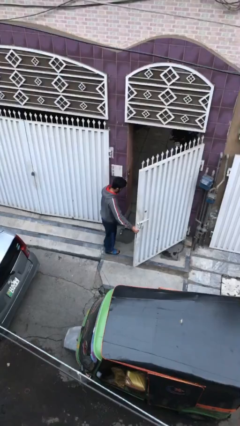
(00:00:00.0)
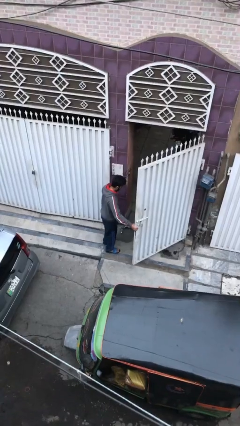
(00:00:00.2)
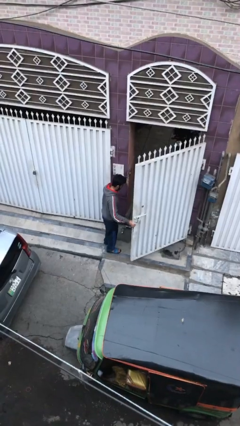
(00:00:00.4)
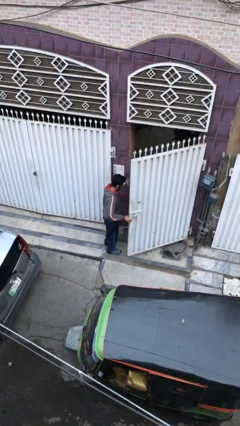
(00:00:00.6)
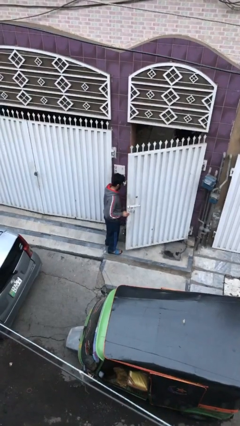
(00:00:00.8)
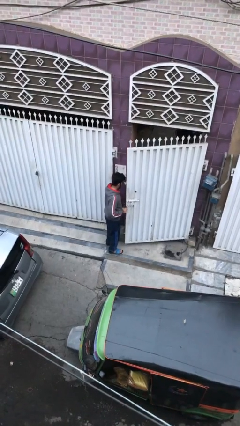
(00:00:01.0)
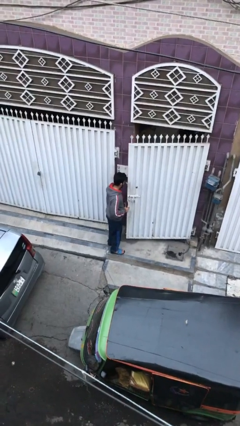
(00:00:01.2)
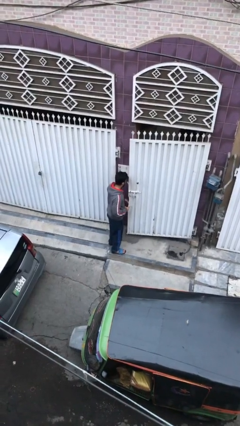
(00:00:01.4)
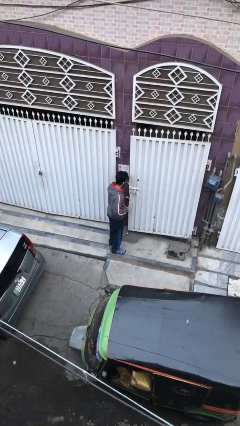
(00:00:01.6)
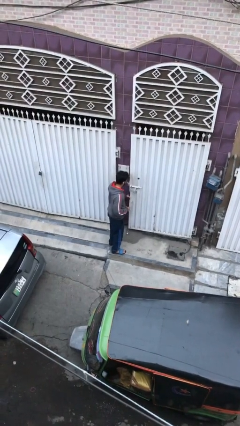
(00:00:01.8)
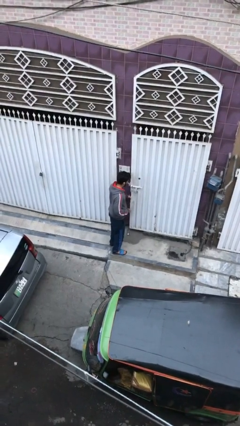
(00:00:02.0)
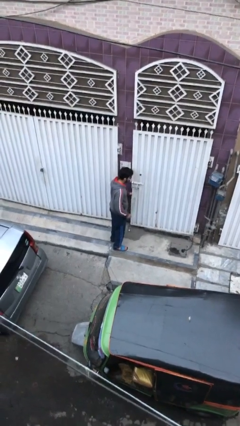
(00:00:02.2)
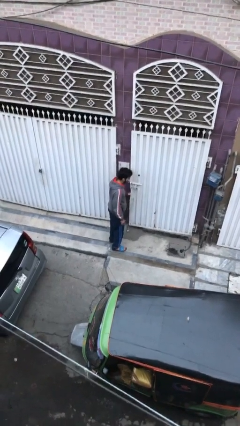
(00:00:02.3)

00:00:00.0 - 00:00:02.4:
person closes facility door

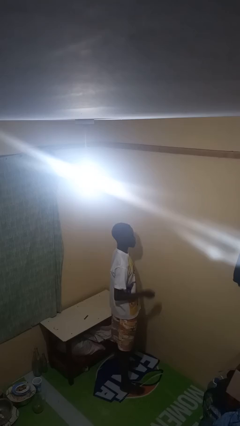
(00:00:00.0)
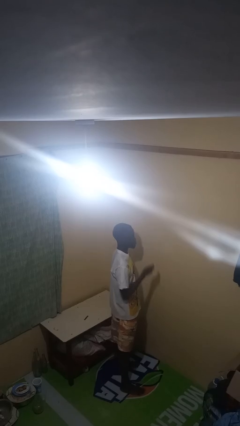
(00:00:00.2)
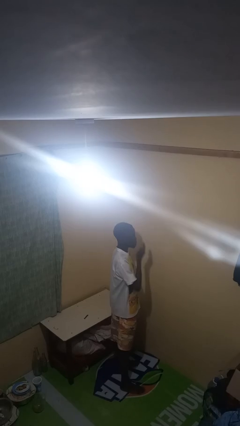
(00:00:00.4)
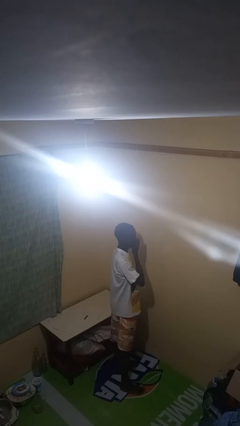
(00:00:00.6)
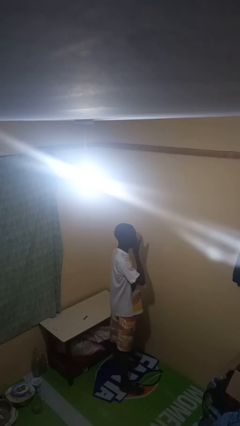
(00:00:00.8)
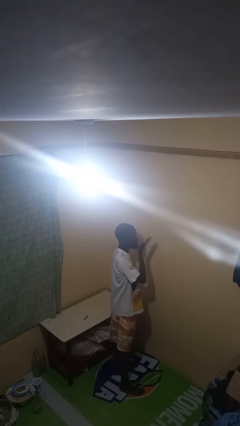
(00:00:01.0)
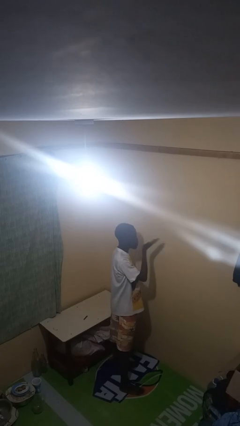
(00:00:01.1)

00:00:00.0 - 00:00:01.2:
person gestures blow kiss

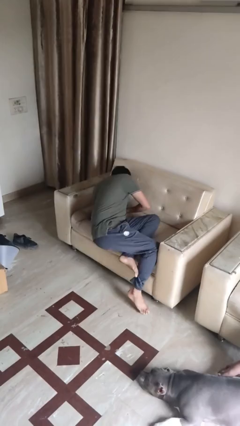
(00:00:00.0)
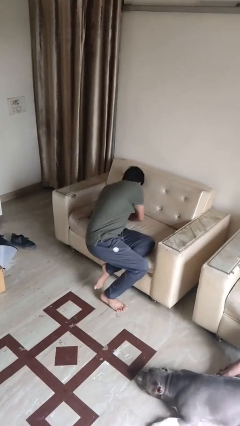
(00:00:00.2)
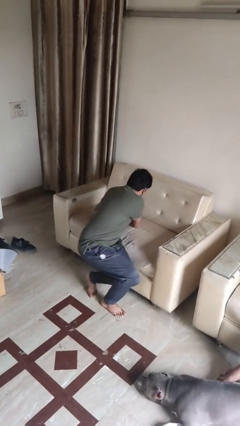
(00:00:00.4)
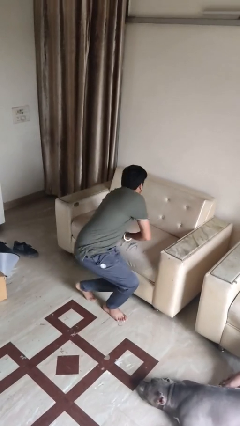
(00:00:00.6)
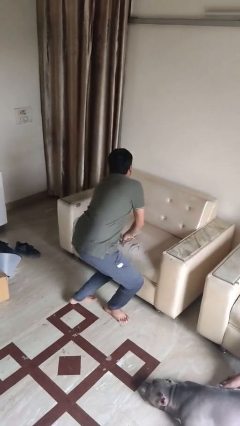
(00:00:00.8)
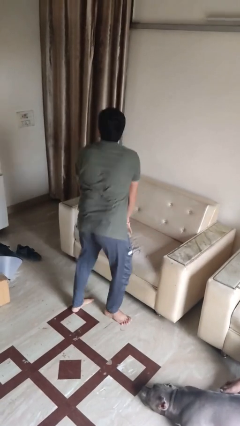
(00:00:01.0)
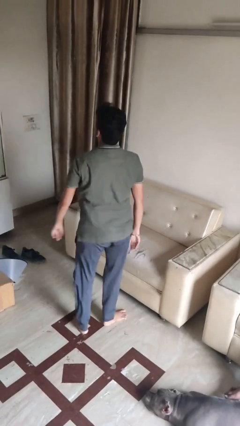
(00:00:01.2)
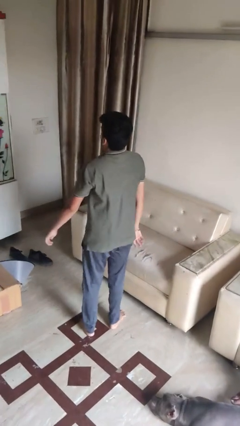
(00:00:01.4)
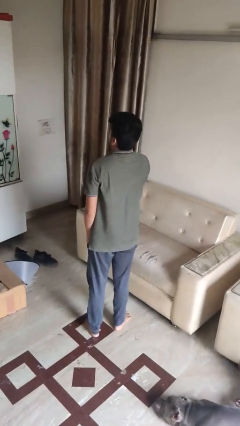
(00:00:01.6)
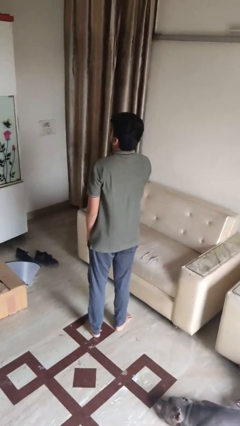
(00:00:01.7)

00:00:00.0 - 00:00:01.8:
person stands up

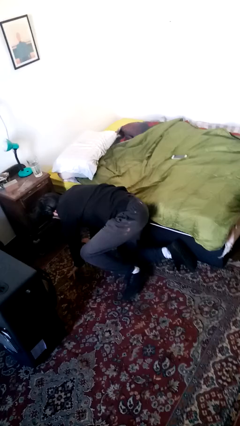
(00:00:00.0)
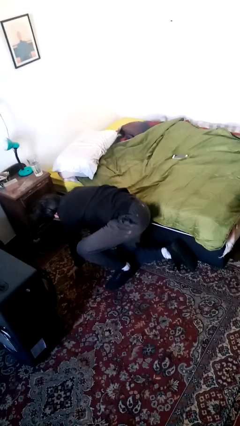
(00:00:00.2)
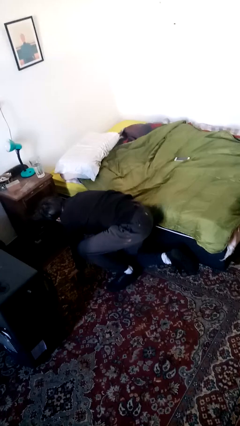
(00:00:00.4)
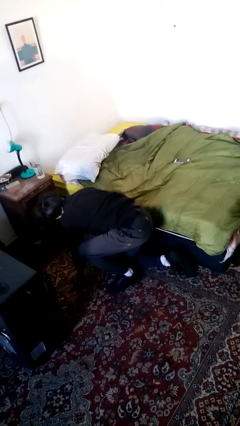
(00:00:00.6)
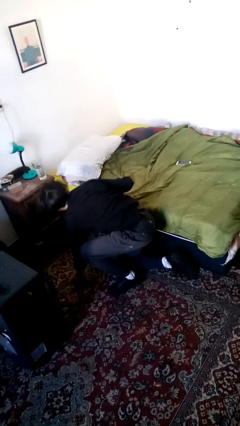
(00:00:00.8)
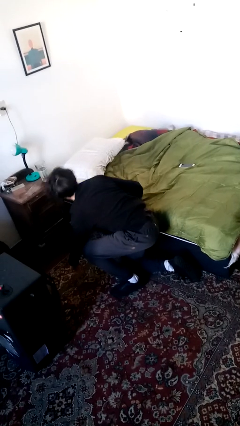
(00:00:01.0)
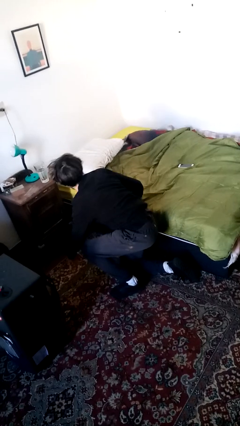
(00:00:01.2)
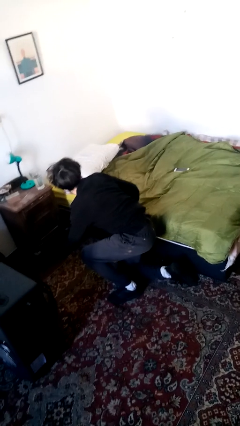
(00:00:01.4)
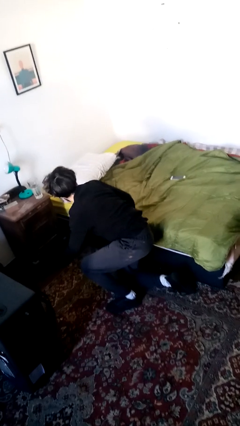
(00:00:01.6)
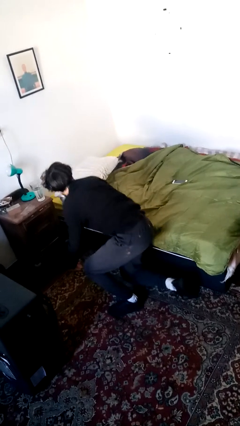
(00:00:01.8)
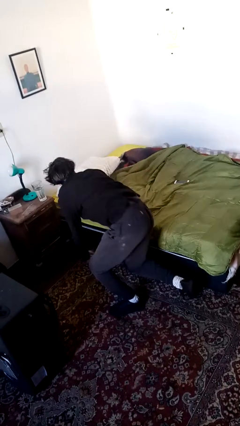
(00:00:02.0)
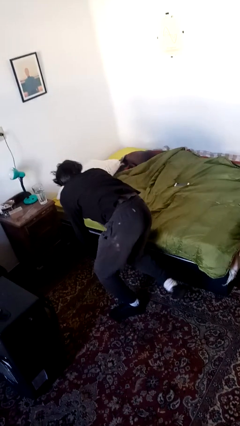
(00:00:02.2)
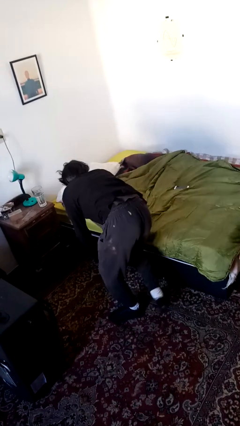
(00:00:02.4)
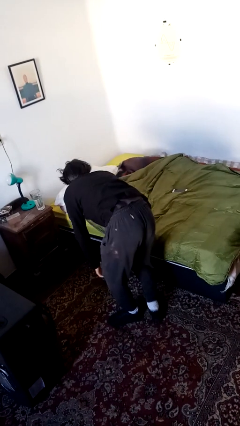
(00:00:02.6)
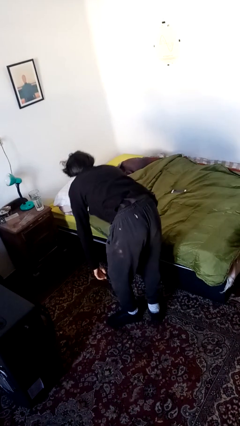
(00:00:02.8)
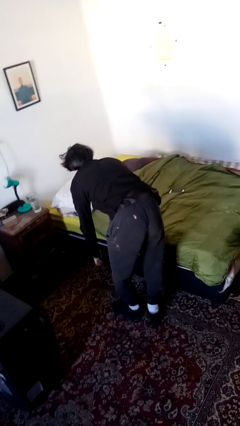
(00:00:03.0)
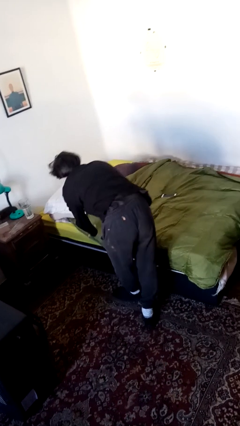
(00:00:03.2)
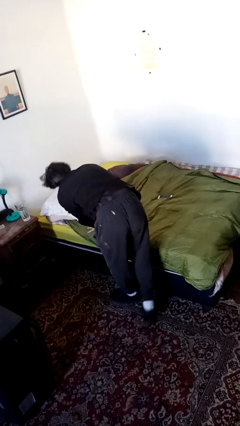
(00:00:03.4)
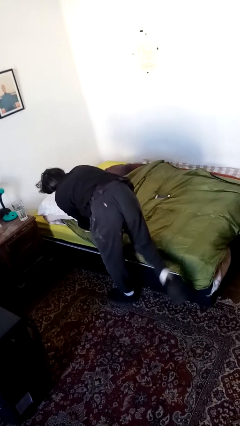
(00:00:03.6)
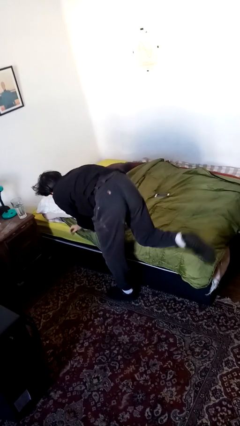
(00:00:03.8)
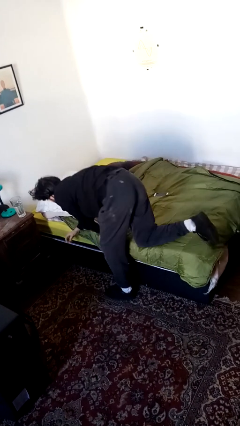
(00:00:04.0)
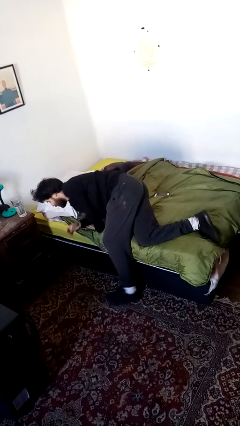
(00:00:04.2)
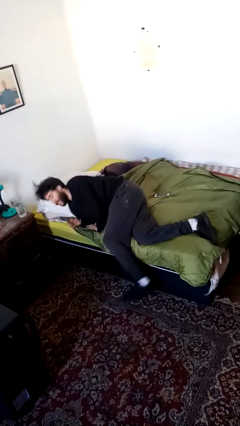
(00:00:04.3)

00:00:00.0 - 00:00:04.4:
person stands up from floor

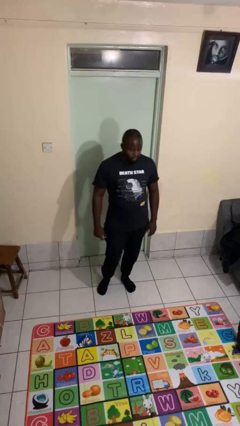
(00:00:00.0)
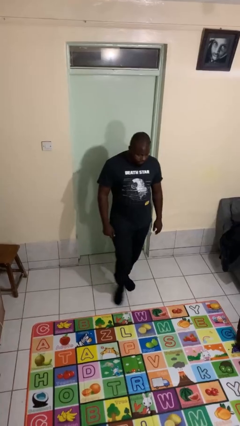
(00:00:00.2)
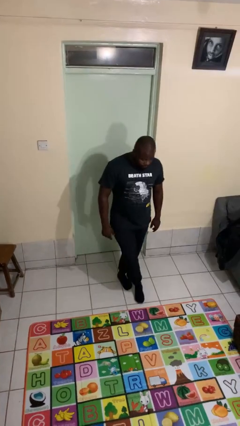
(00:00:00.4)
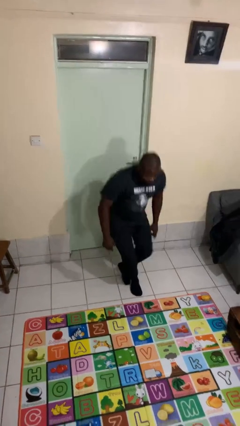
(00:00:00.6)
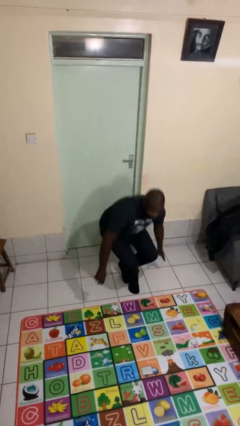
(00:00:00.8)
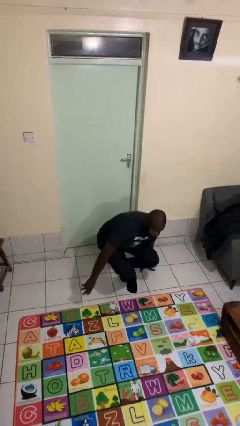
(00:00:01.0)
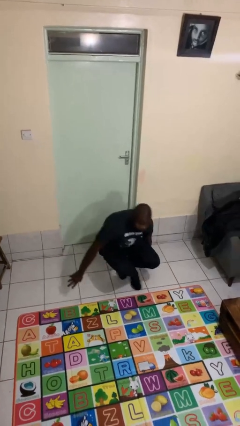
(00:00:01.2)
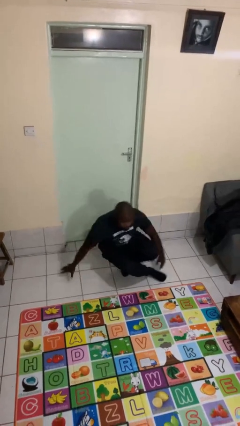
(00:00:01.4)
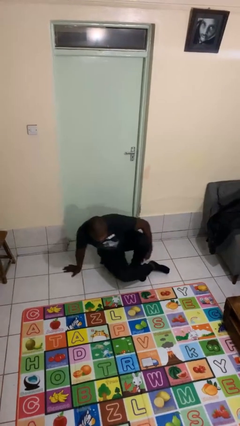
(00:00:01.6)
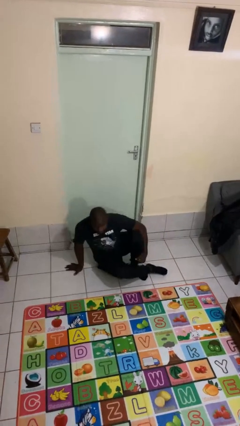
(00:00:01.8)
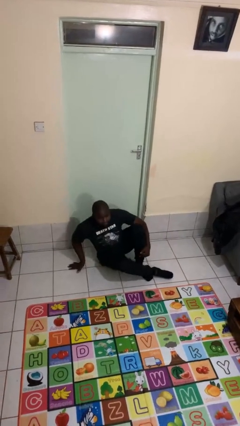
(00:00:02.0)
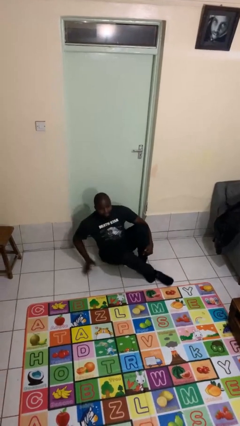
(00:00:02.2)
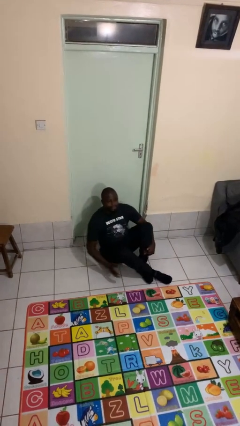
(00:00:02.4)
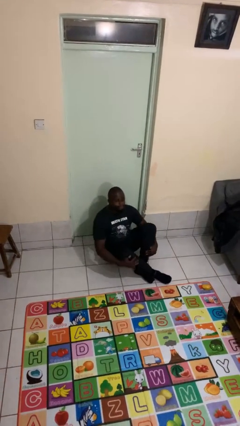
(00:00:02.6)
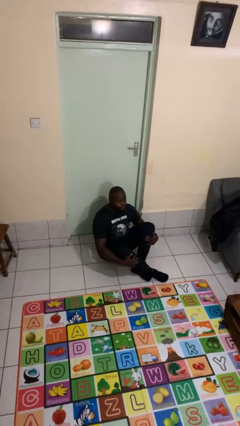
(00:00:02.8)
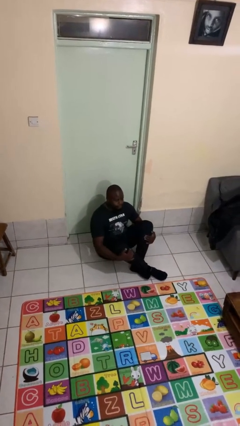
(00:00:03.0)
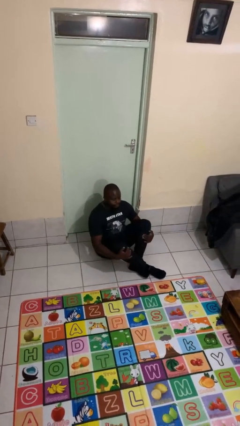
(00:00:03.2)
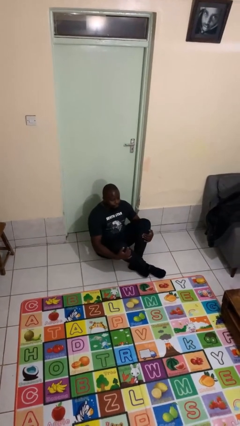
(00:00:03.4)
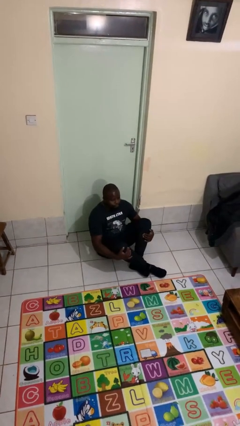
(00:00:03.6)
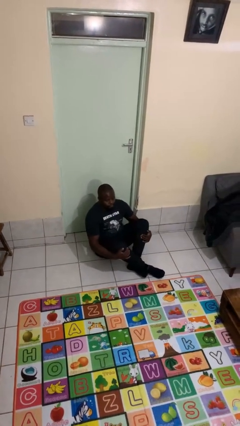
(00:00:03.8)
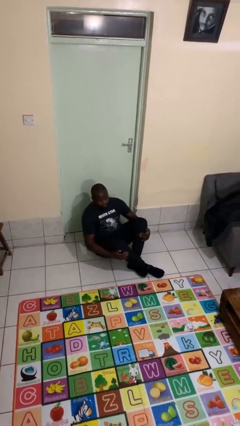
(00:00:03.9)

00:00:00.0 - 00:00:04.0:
person sits crisscross

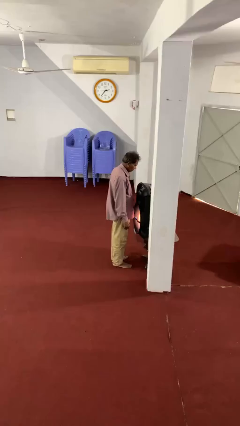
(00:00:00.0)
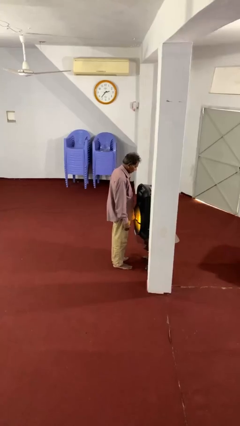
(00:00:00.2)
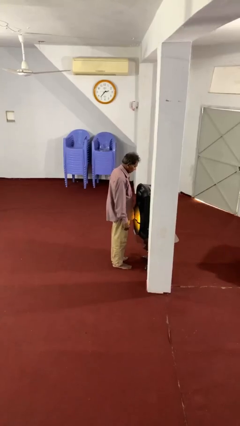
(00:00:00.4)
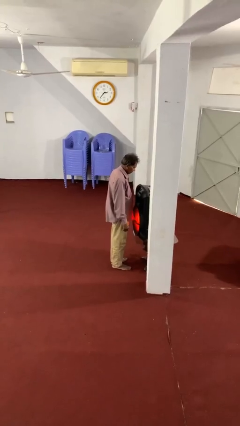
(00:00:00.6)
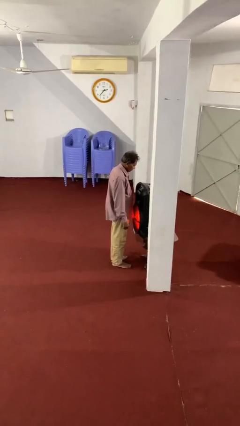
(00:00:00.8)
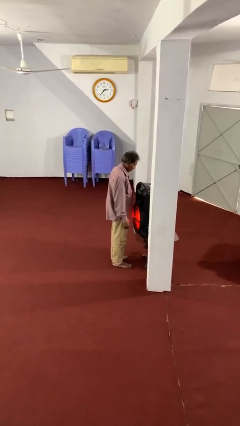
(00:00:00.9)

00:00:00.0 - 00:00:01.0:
person purchases from machine

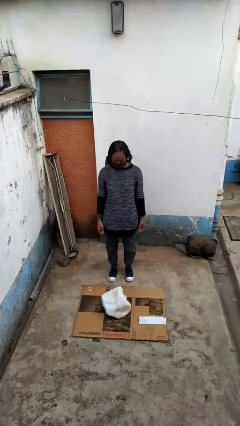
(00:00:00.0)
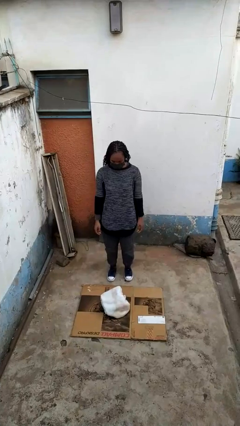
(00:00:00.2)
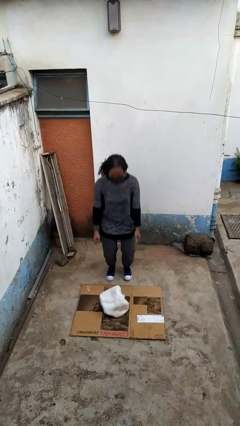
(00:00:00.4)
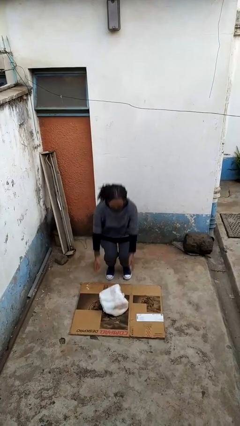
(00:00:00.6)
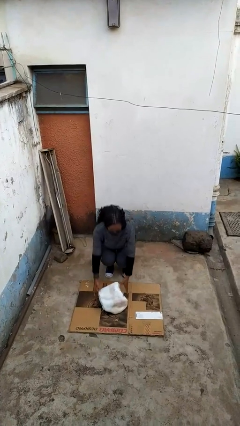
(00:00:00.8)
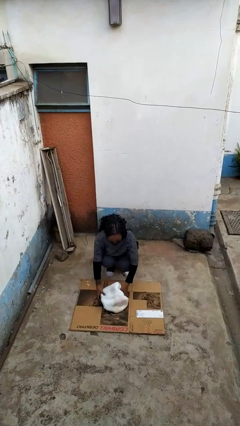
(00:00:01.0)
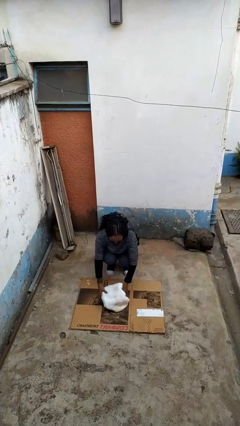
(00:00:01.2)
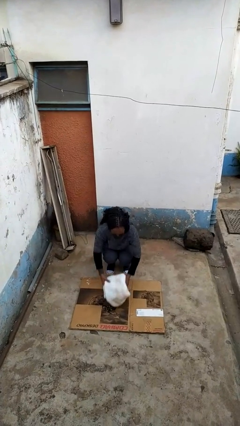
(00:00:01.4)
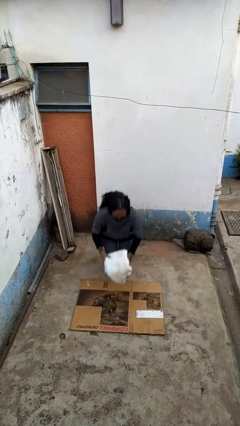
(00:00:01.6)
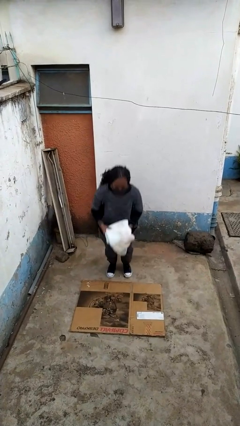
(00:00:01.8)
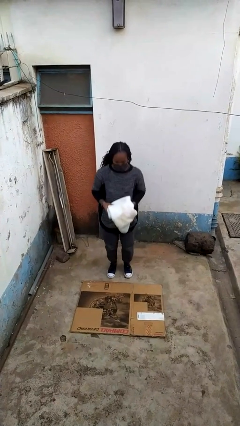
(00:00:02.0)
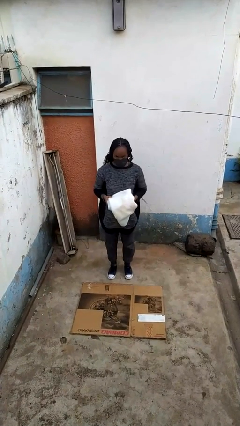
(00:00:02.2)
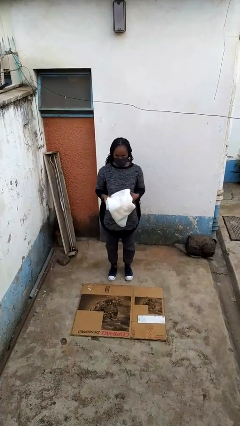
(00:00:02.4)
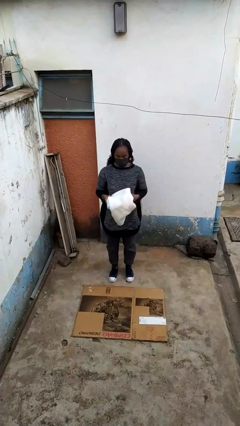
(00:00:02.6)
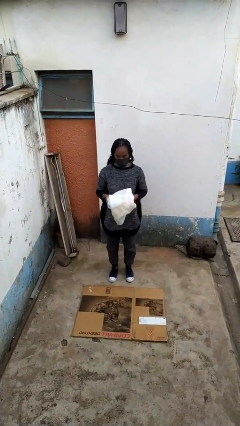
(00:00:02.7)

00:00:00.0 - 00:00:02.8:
person picks up object from floor
